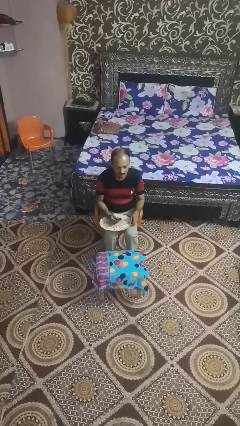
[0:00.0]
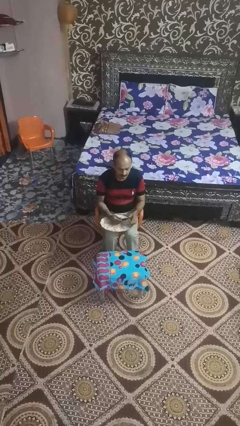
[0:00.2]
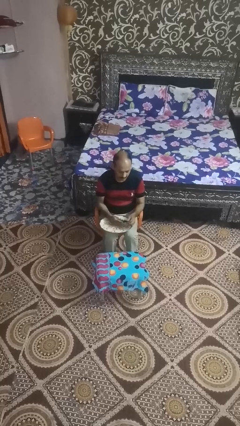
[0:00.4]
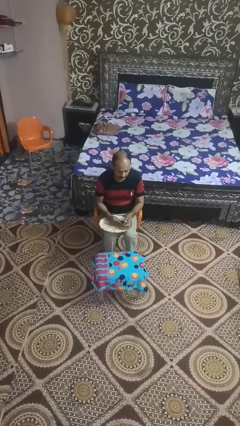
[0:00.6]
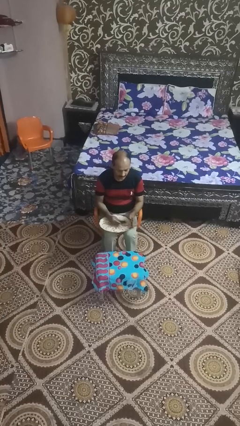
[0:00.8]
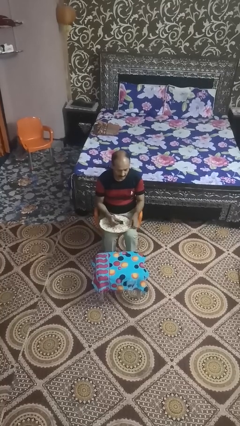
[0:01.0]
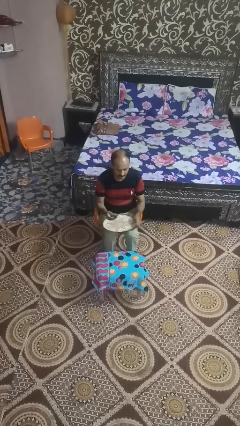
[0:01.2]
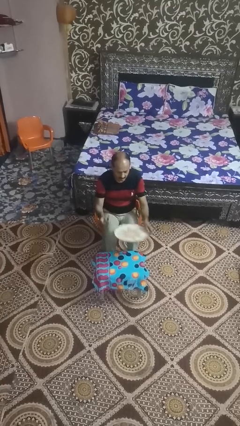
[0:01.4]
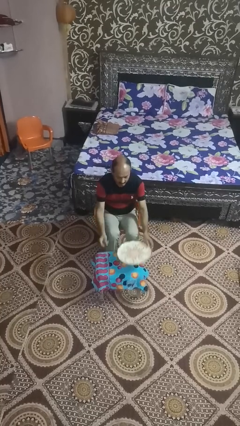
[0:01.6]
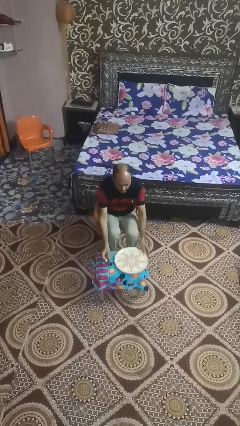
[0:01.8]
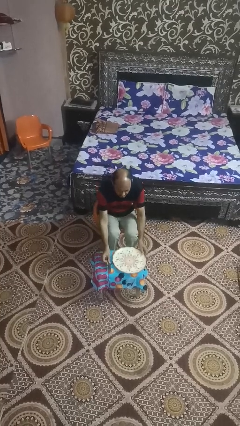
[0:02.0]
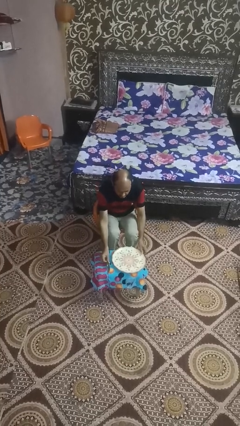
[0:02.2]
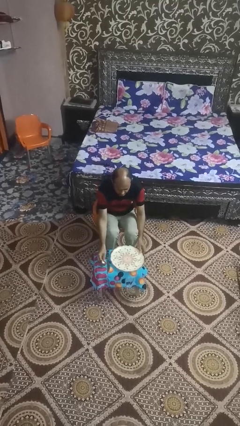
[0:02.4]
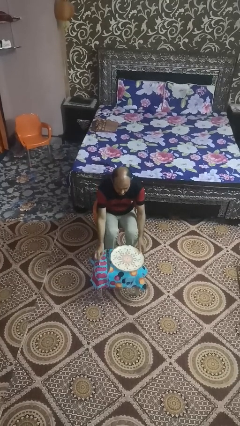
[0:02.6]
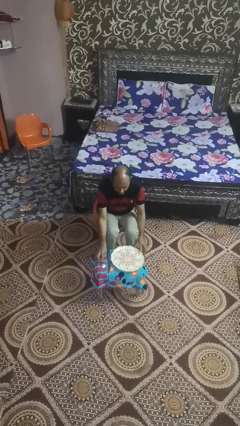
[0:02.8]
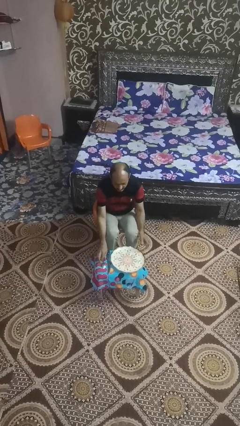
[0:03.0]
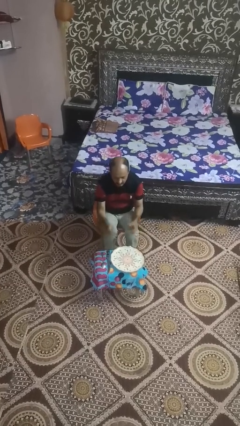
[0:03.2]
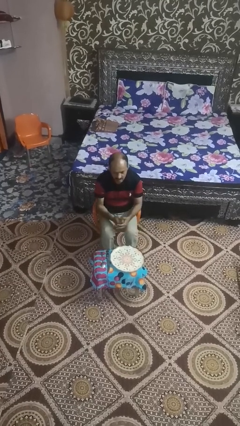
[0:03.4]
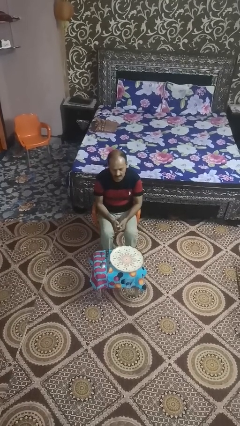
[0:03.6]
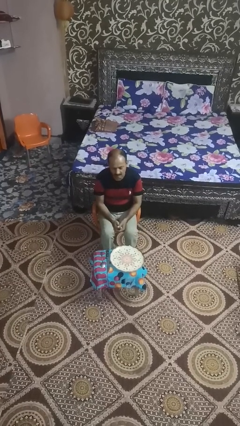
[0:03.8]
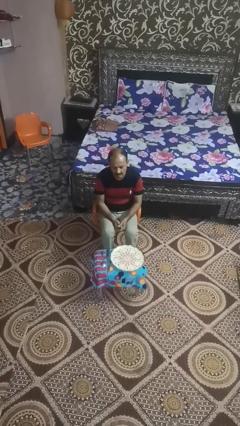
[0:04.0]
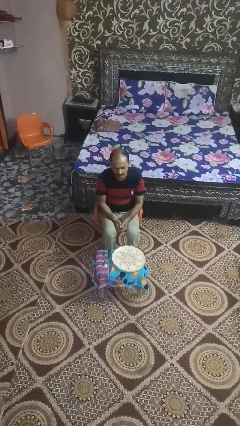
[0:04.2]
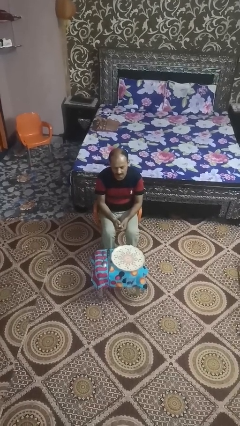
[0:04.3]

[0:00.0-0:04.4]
person sets table

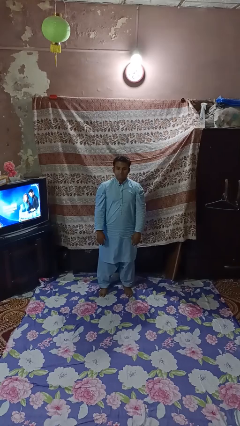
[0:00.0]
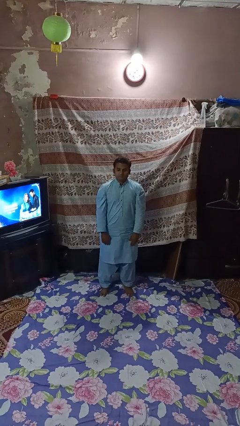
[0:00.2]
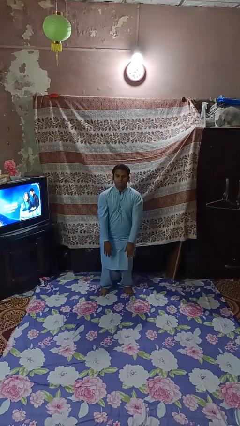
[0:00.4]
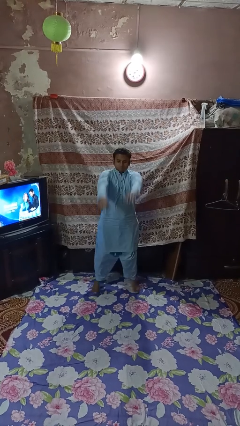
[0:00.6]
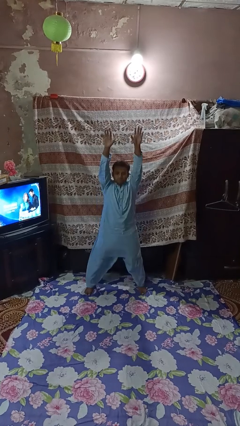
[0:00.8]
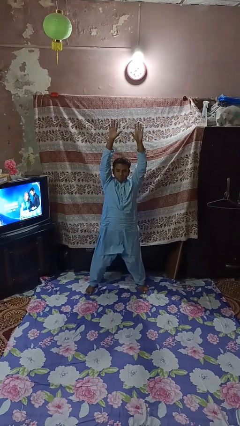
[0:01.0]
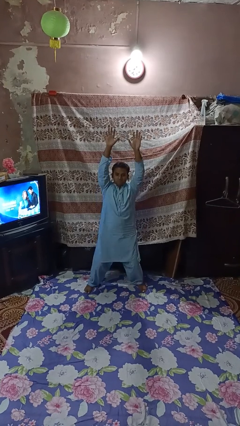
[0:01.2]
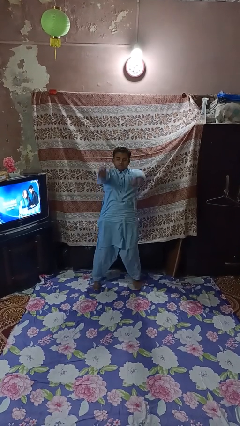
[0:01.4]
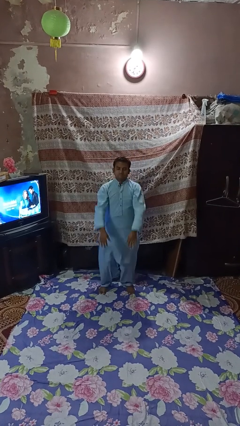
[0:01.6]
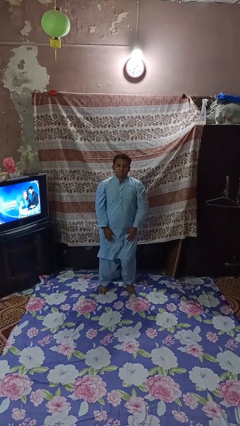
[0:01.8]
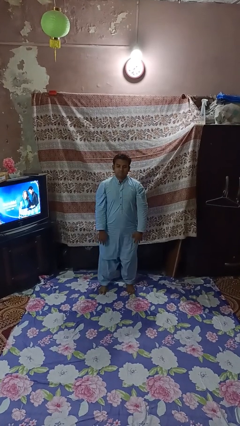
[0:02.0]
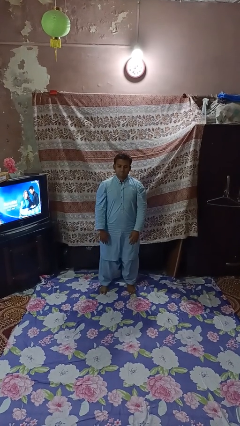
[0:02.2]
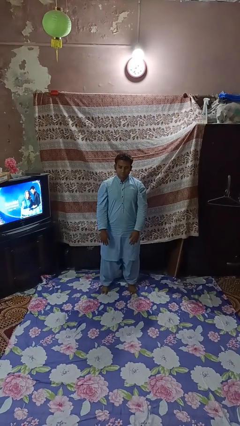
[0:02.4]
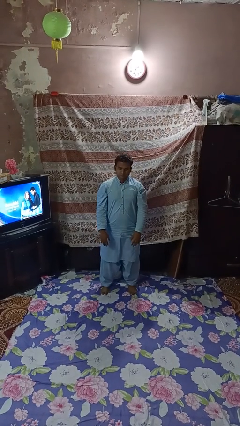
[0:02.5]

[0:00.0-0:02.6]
person exercises with jumping jacks

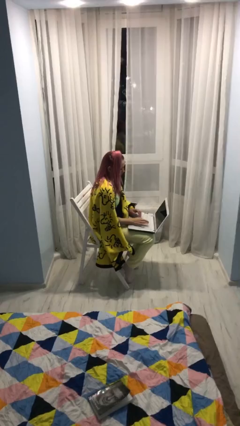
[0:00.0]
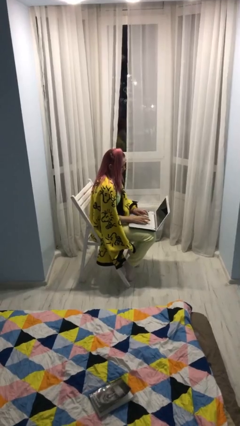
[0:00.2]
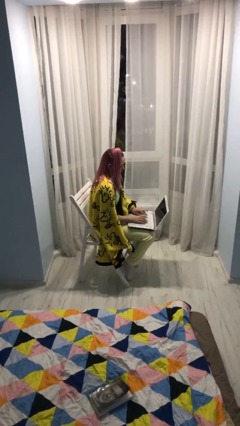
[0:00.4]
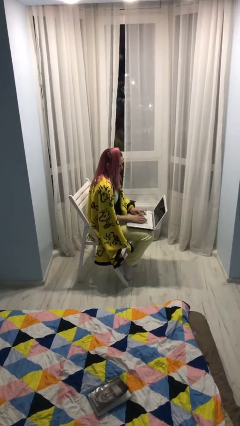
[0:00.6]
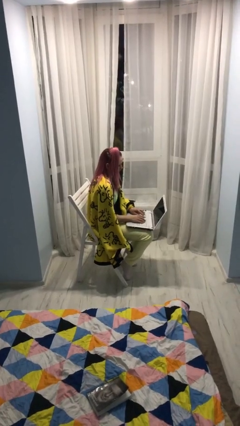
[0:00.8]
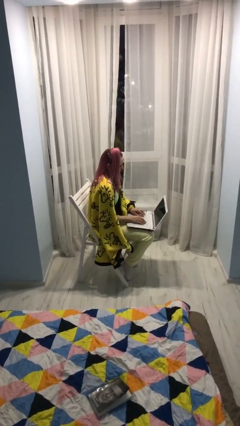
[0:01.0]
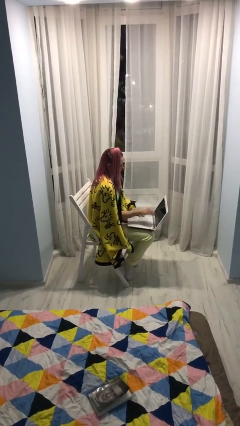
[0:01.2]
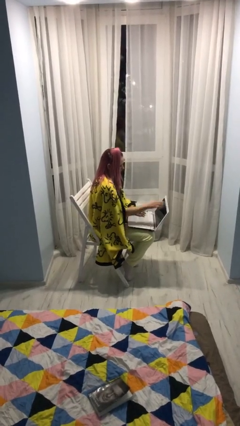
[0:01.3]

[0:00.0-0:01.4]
person interacts with laptop

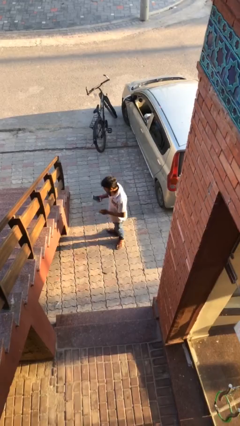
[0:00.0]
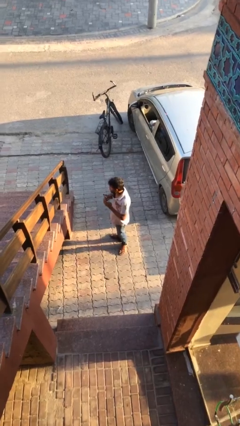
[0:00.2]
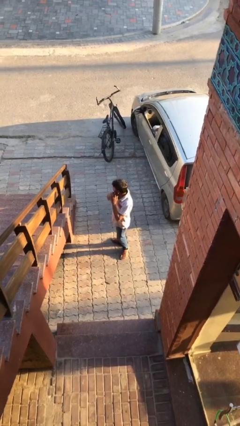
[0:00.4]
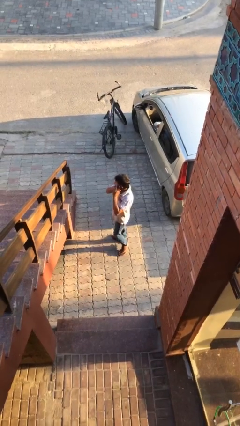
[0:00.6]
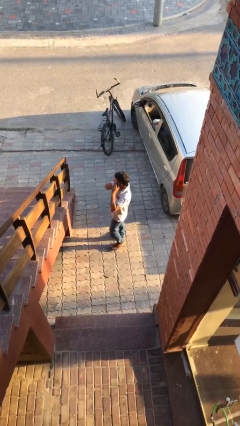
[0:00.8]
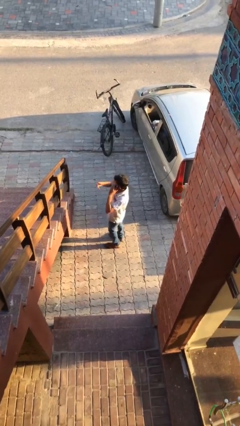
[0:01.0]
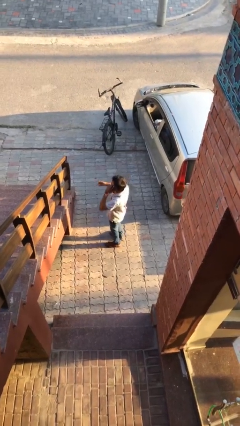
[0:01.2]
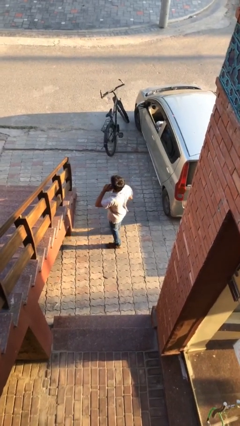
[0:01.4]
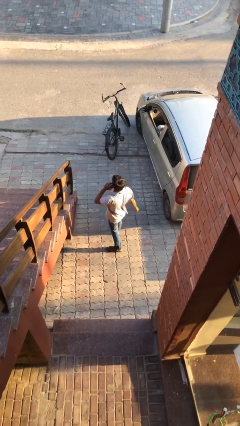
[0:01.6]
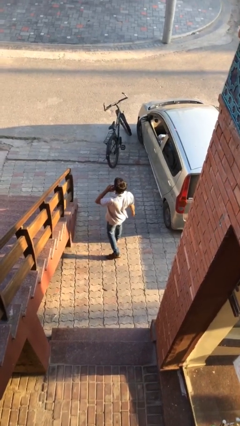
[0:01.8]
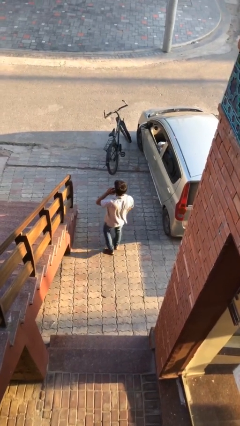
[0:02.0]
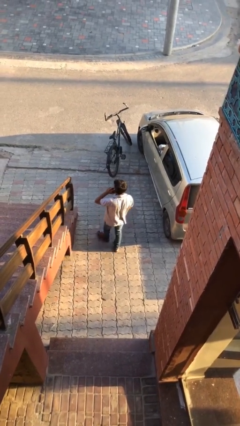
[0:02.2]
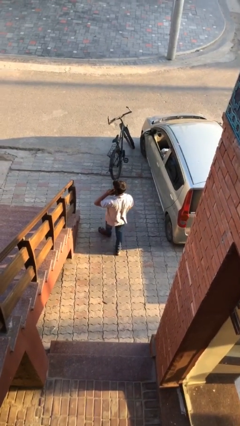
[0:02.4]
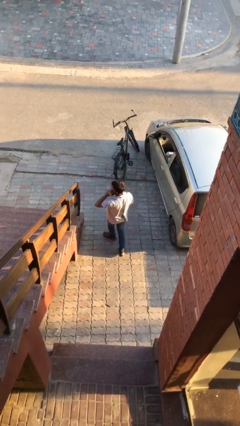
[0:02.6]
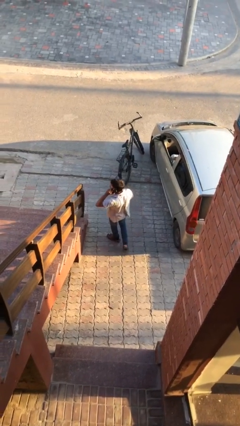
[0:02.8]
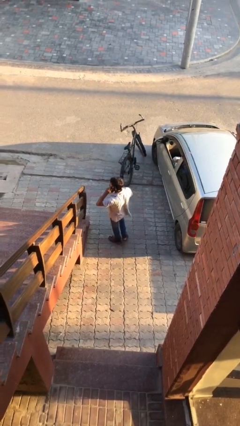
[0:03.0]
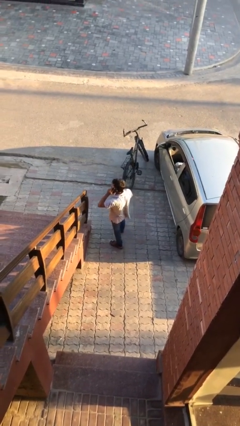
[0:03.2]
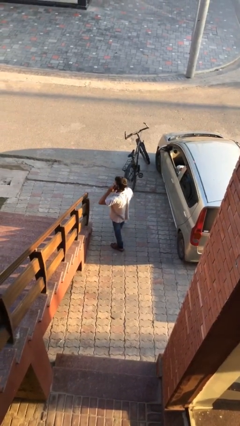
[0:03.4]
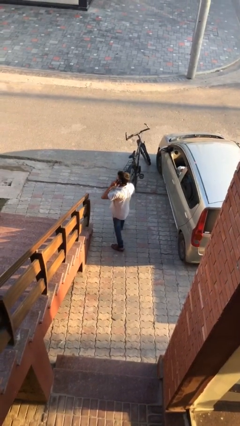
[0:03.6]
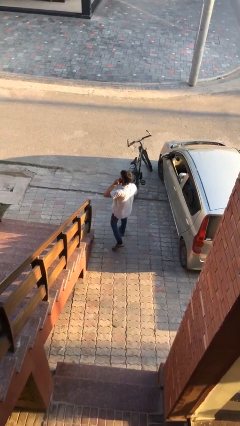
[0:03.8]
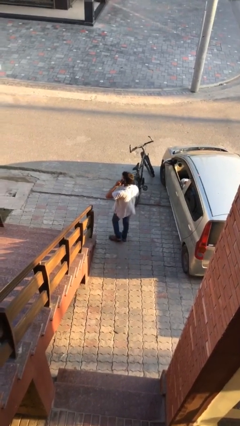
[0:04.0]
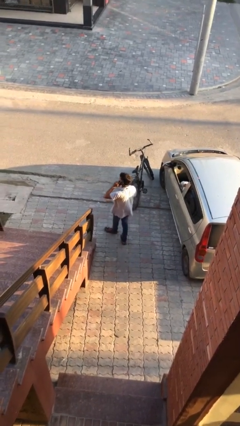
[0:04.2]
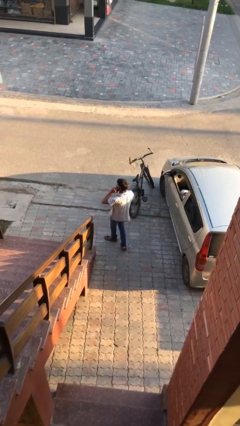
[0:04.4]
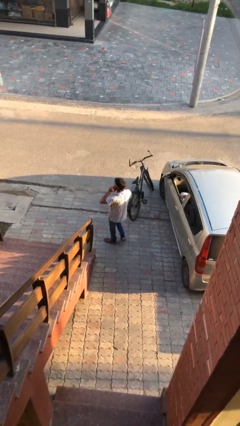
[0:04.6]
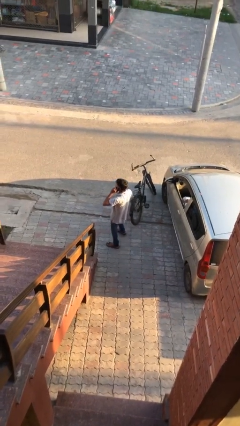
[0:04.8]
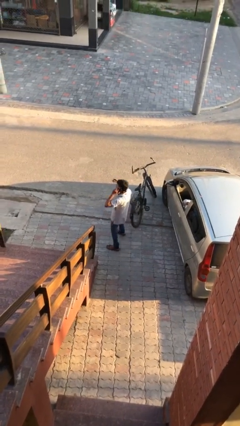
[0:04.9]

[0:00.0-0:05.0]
person talks on phone

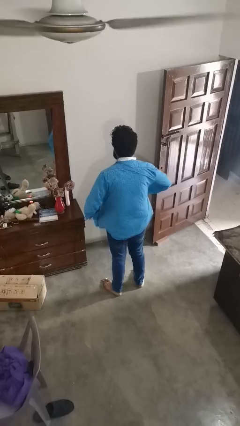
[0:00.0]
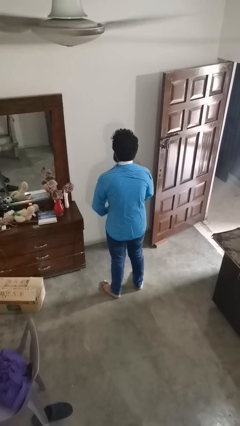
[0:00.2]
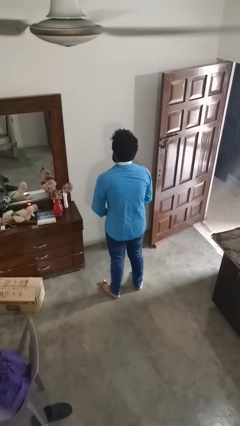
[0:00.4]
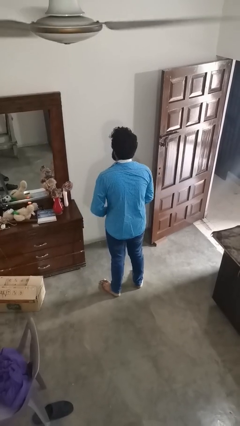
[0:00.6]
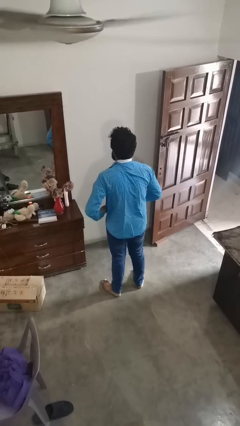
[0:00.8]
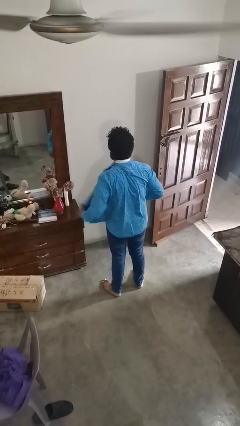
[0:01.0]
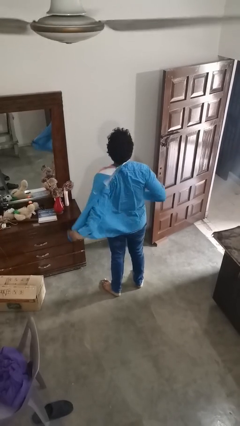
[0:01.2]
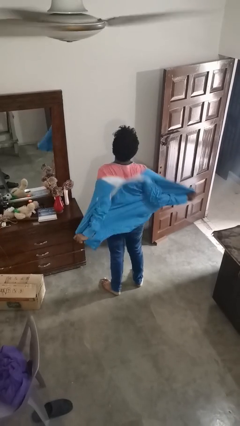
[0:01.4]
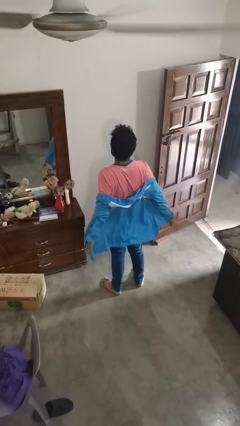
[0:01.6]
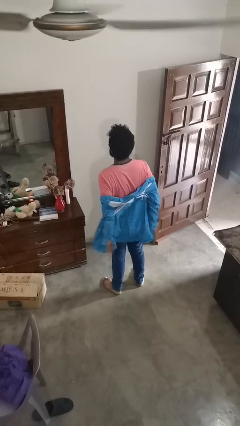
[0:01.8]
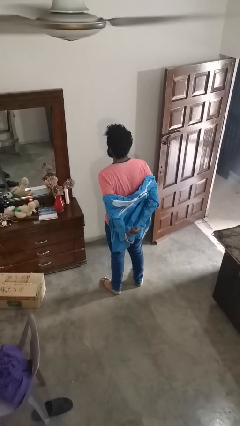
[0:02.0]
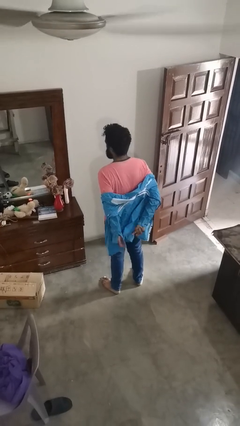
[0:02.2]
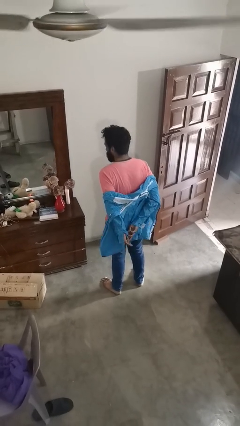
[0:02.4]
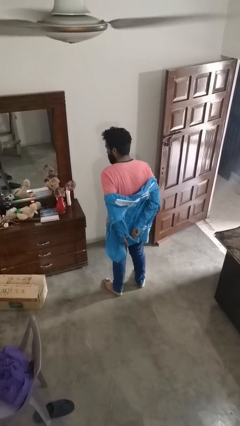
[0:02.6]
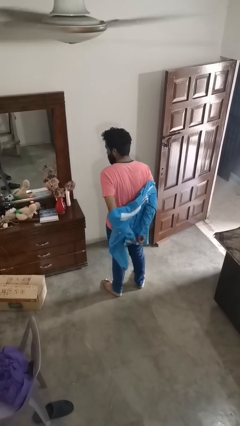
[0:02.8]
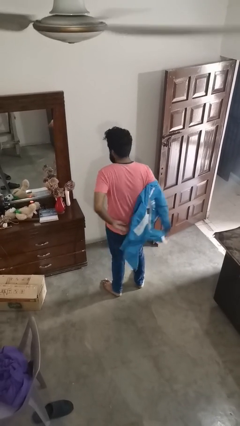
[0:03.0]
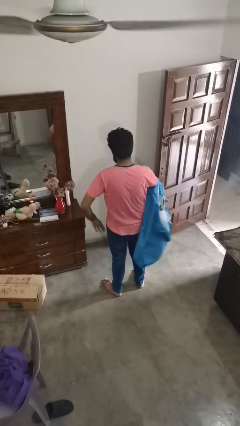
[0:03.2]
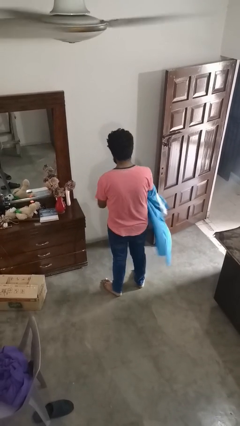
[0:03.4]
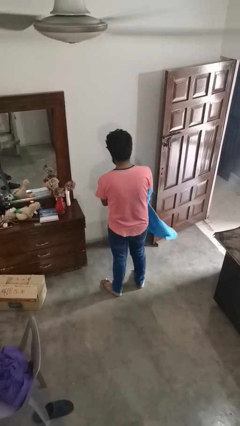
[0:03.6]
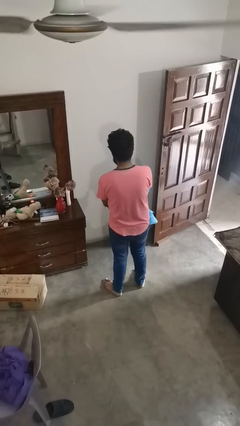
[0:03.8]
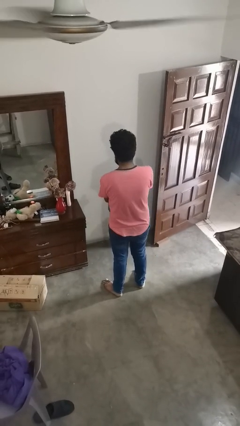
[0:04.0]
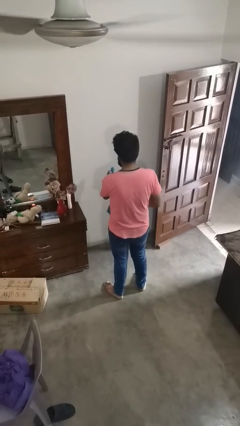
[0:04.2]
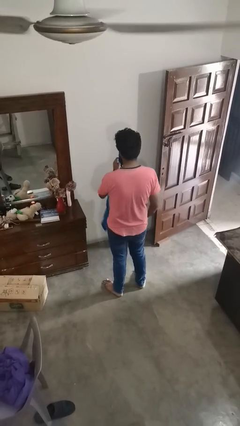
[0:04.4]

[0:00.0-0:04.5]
person takes off shirt
